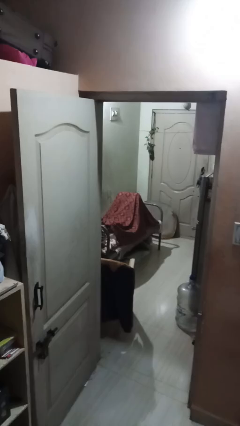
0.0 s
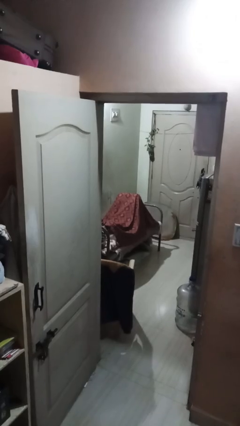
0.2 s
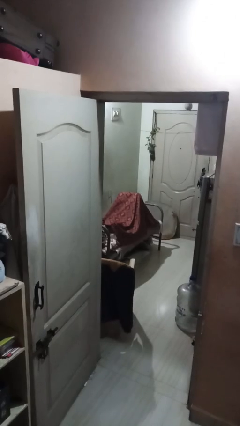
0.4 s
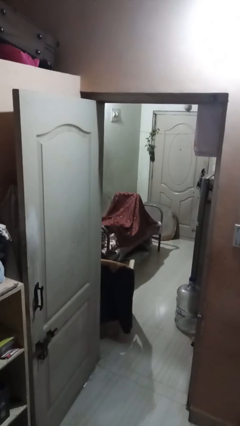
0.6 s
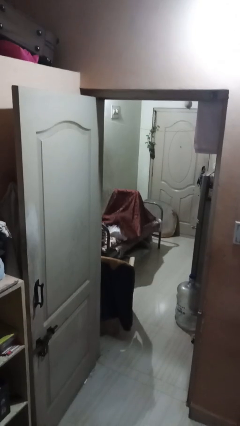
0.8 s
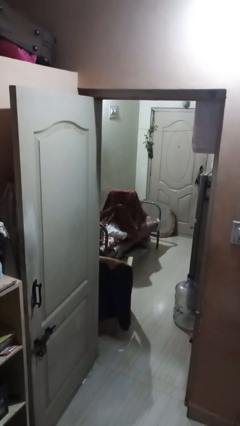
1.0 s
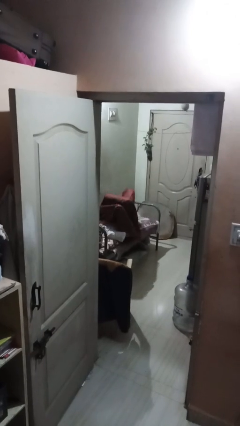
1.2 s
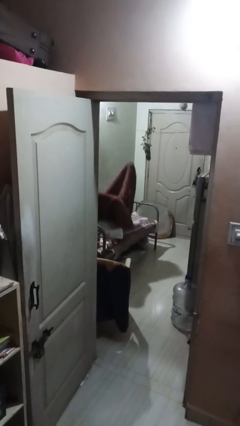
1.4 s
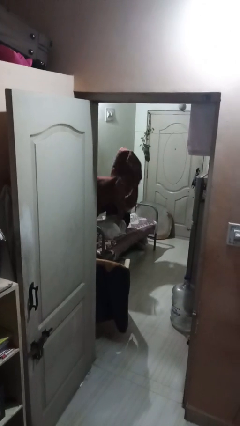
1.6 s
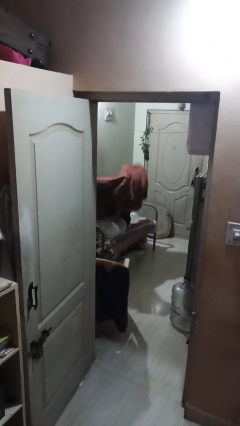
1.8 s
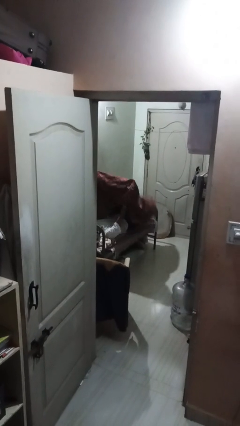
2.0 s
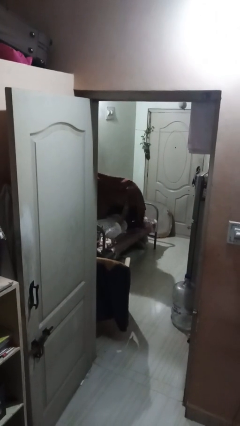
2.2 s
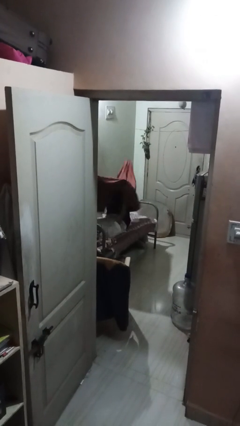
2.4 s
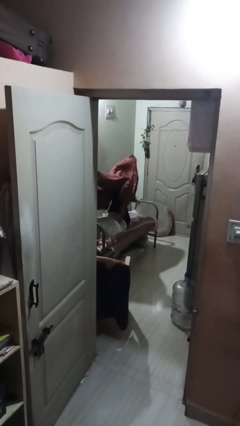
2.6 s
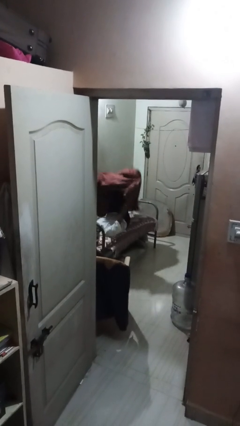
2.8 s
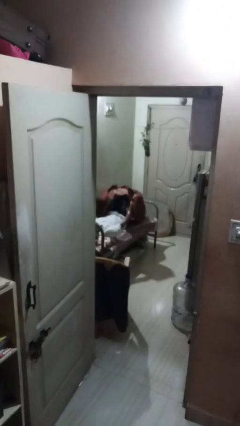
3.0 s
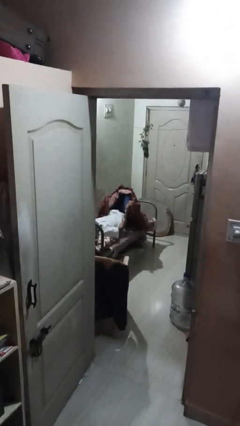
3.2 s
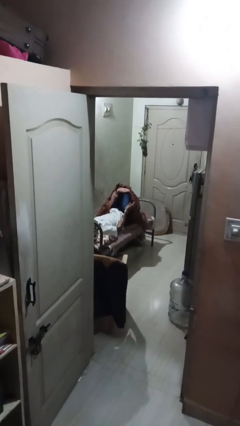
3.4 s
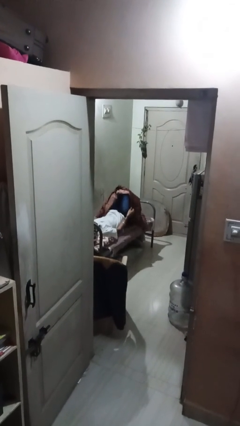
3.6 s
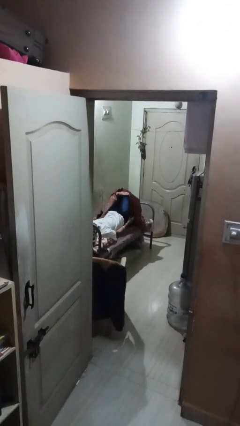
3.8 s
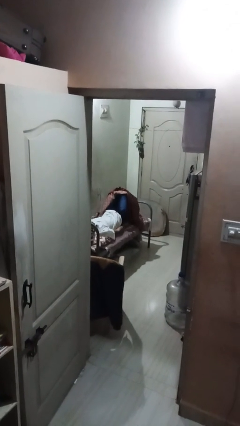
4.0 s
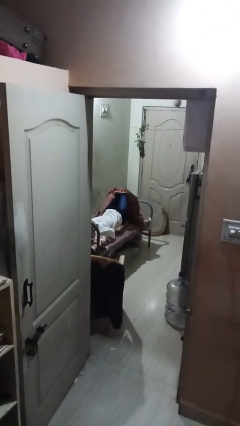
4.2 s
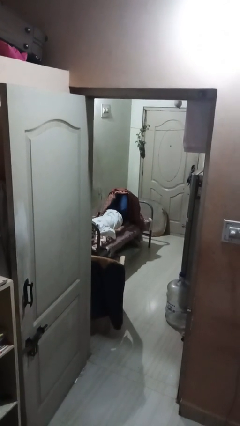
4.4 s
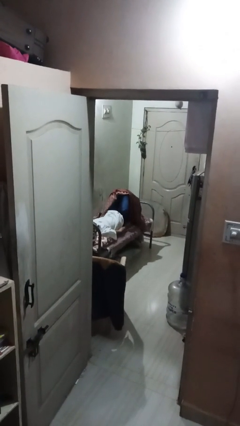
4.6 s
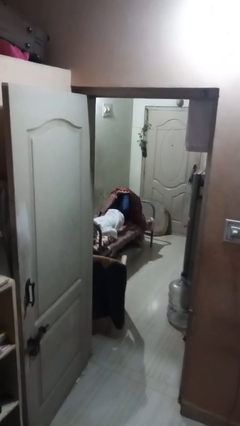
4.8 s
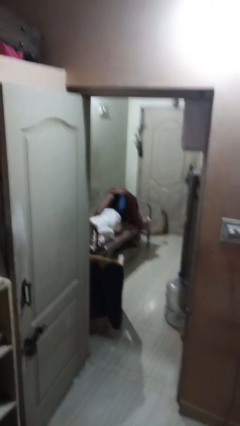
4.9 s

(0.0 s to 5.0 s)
person uncovers with bedsheets

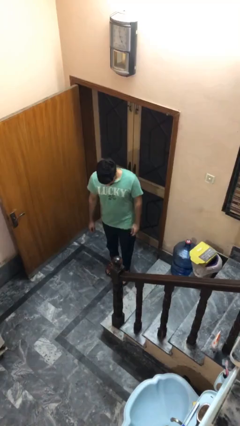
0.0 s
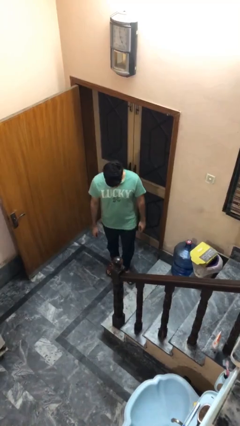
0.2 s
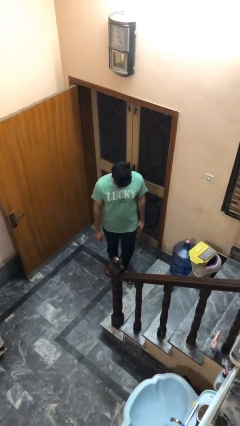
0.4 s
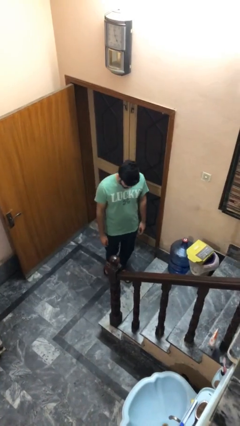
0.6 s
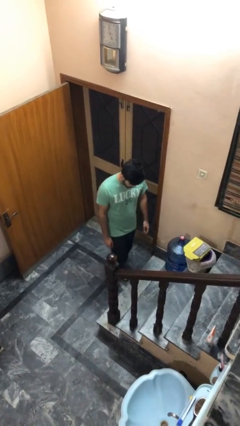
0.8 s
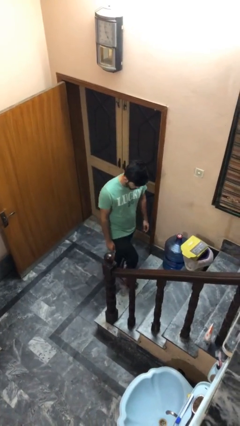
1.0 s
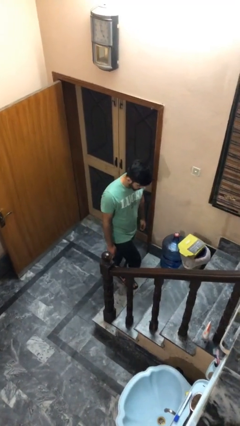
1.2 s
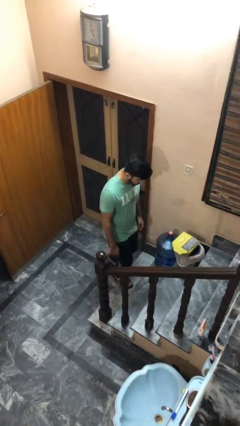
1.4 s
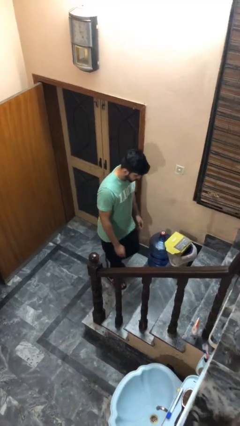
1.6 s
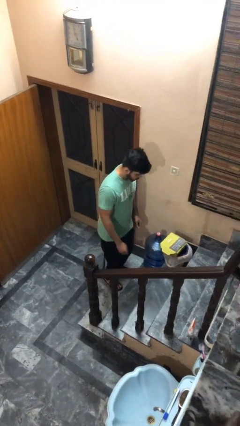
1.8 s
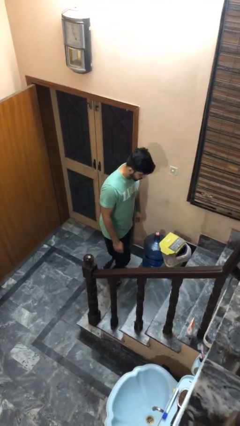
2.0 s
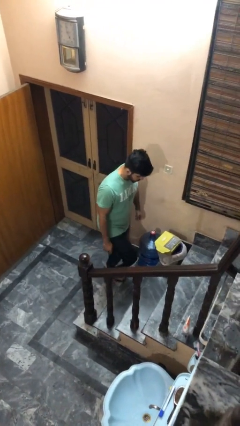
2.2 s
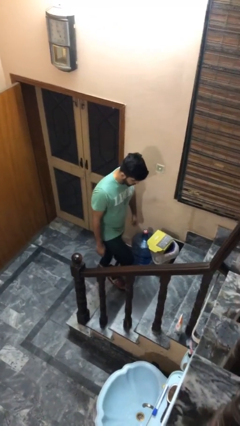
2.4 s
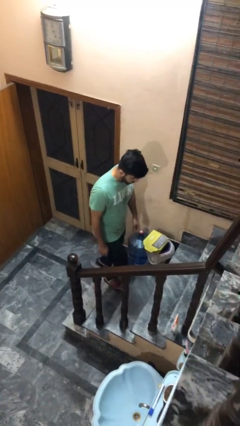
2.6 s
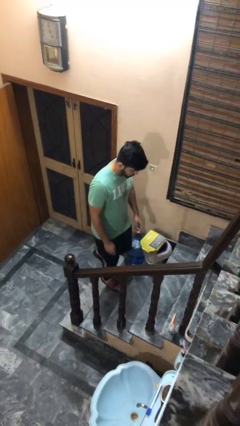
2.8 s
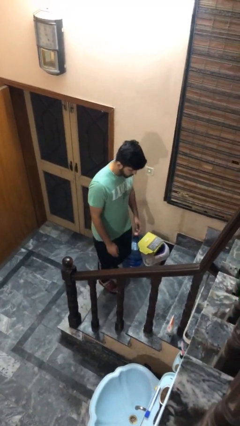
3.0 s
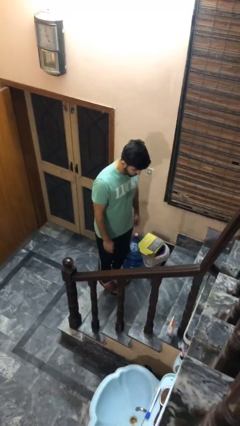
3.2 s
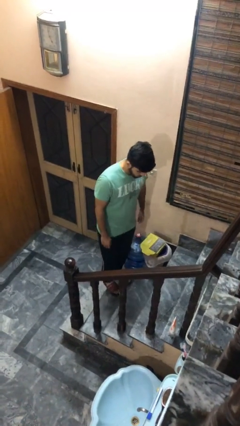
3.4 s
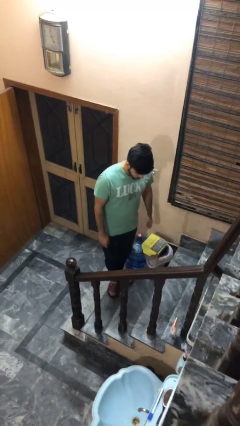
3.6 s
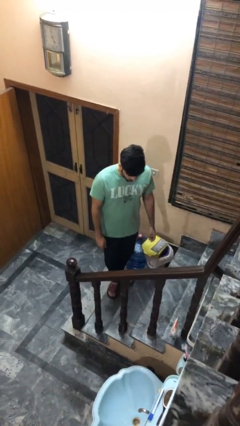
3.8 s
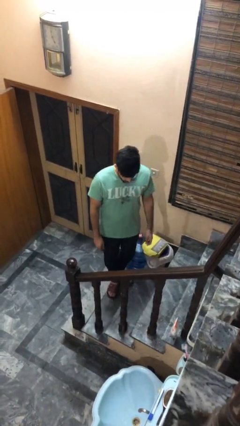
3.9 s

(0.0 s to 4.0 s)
person climbs up stairs

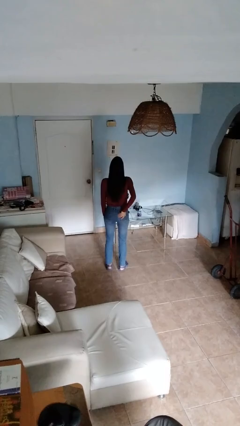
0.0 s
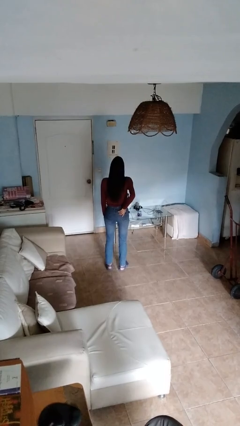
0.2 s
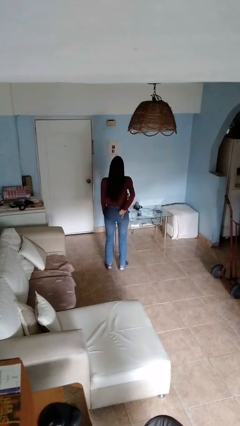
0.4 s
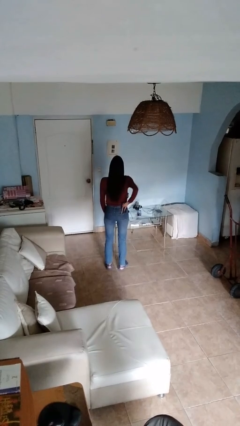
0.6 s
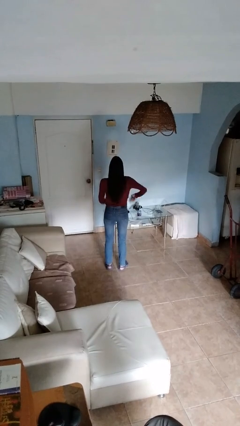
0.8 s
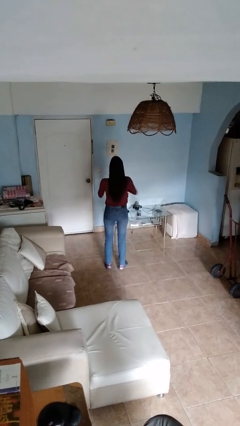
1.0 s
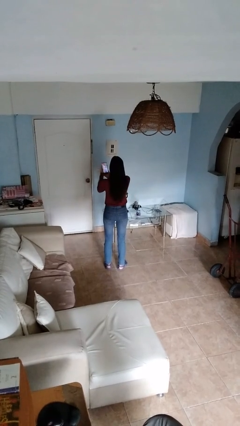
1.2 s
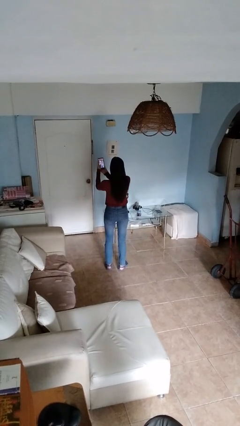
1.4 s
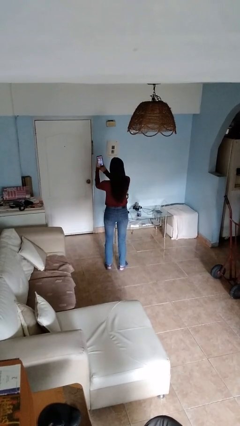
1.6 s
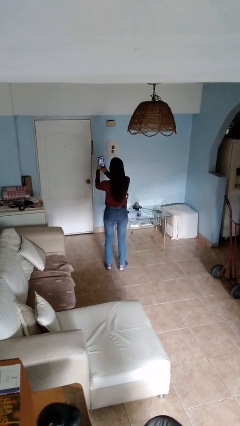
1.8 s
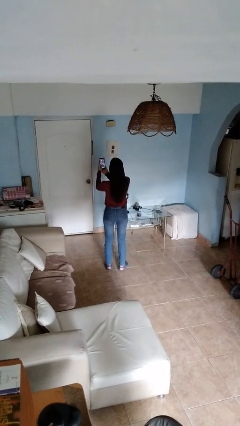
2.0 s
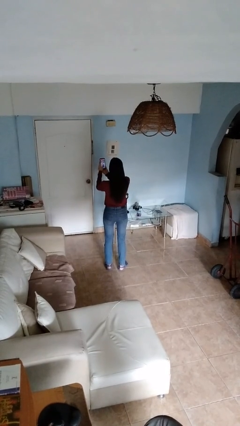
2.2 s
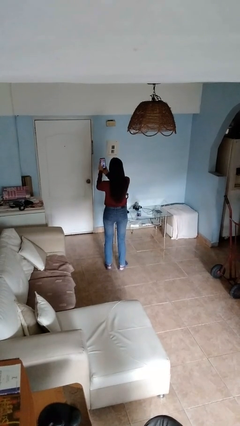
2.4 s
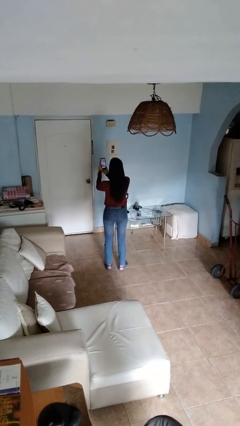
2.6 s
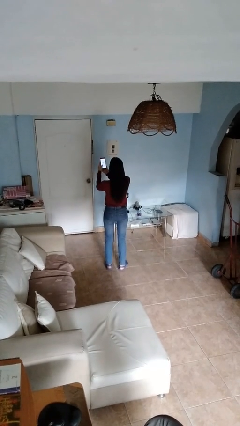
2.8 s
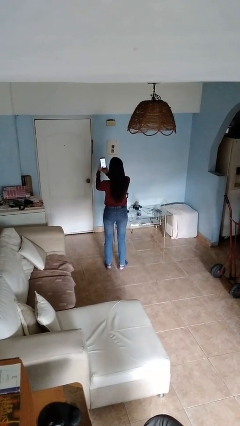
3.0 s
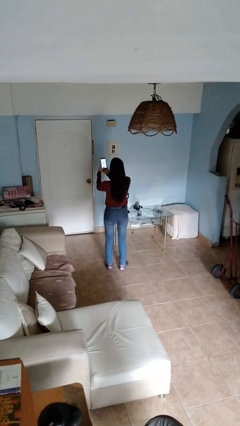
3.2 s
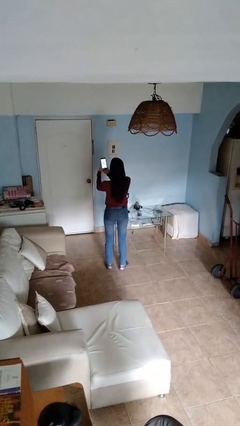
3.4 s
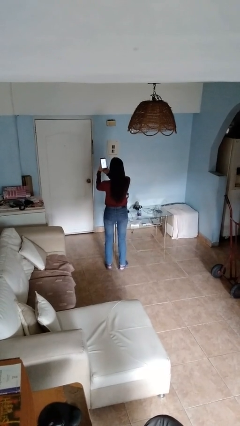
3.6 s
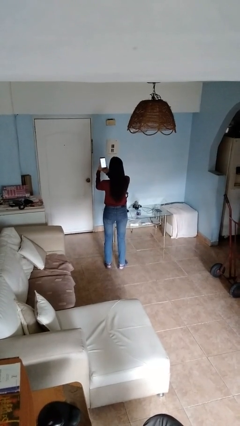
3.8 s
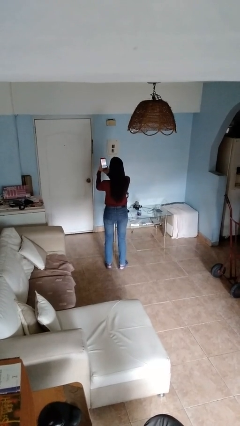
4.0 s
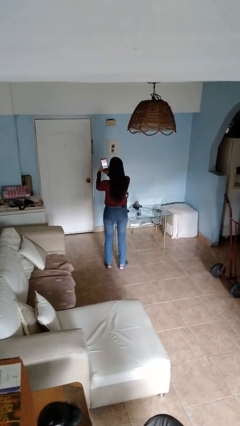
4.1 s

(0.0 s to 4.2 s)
person takes phone from pocket

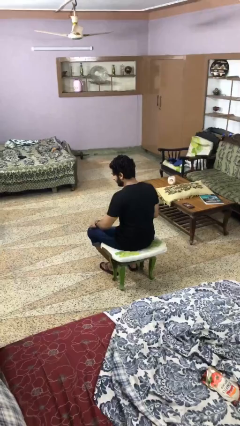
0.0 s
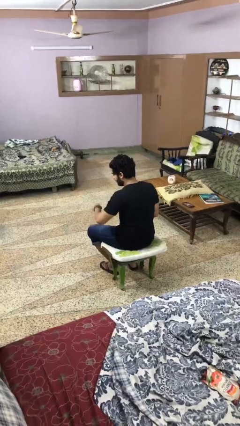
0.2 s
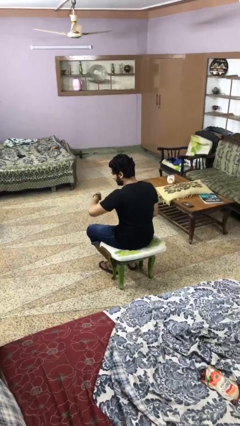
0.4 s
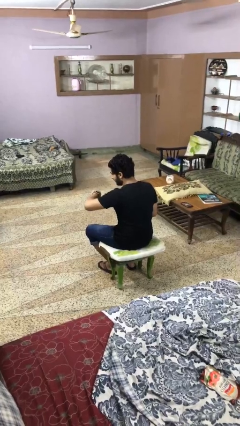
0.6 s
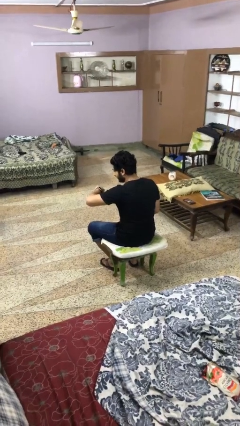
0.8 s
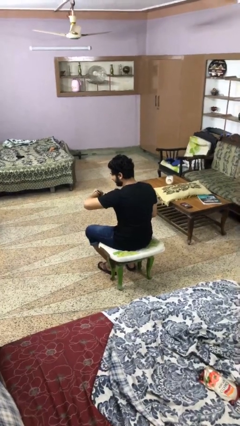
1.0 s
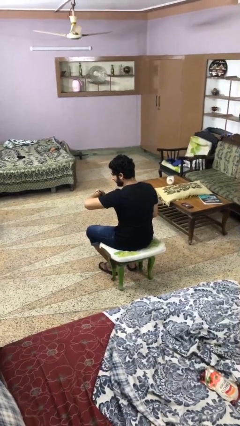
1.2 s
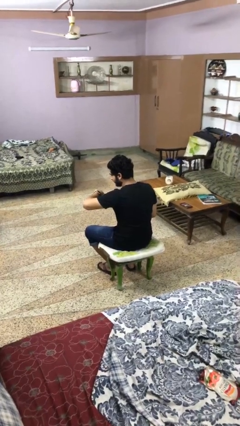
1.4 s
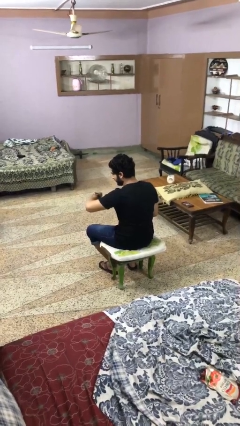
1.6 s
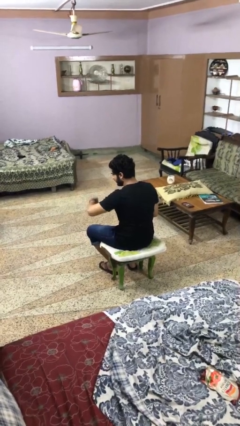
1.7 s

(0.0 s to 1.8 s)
person looks at wristwatch

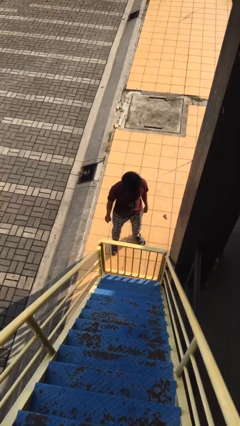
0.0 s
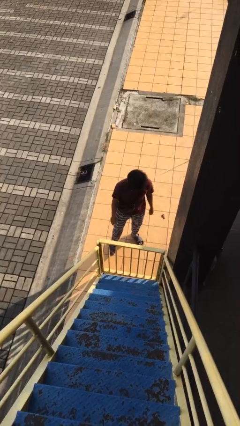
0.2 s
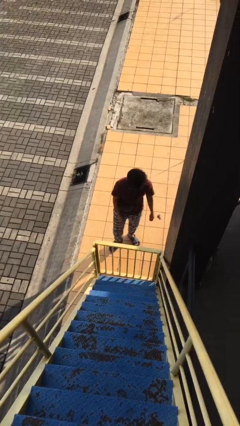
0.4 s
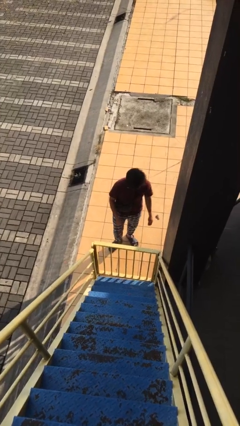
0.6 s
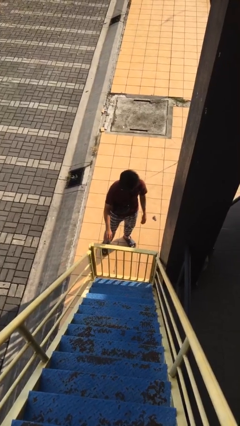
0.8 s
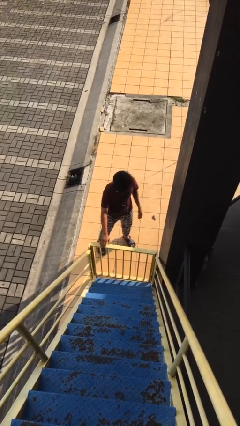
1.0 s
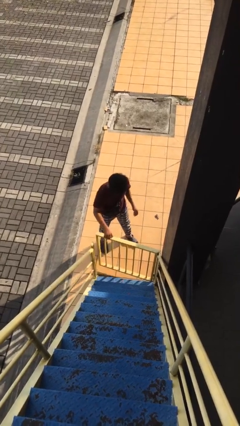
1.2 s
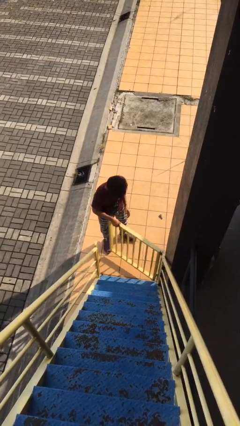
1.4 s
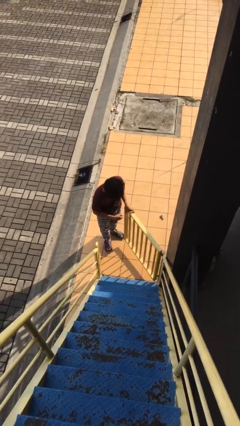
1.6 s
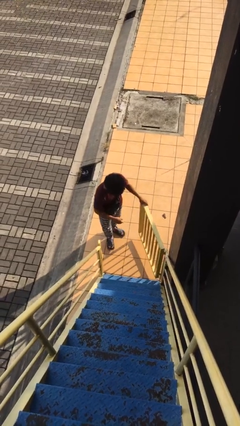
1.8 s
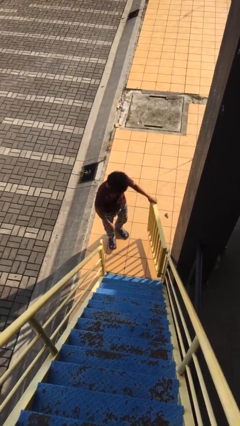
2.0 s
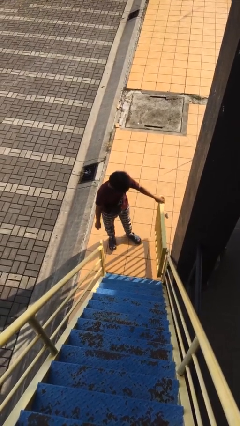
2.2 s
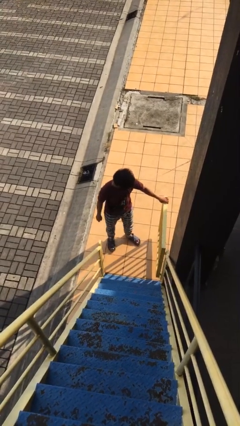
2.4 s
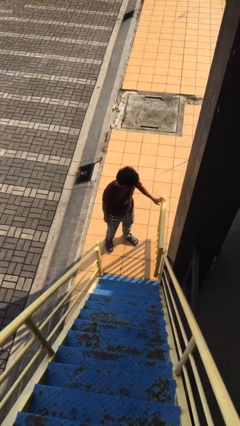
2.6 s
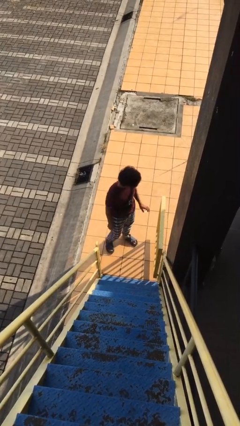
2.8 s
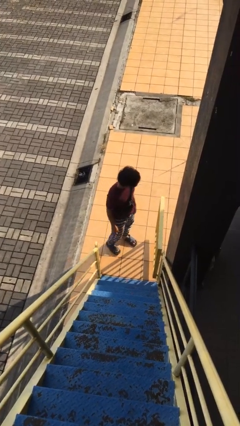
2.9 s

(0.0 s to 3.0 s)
person opens facility door
